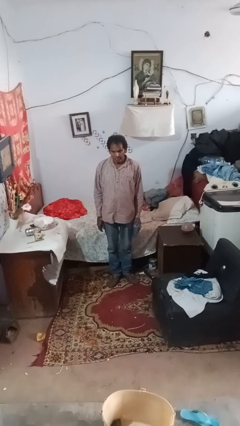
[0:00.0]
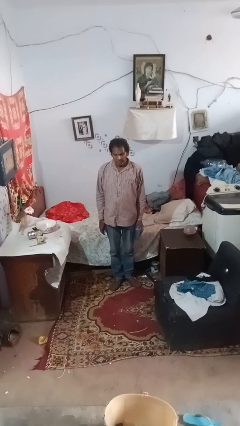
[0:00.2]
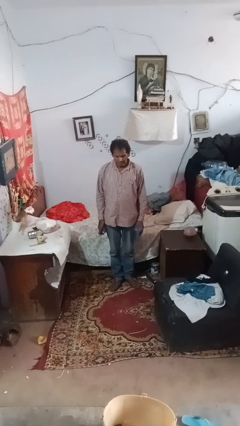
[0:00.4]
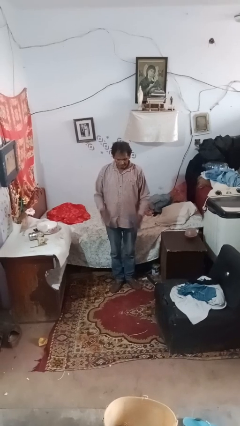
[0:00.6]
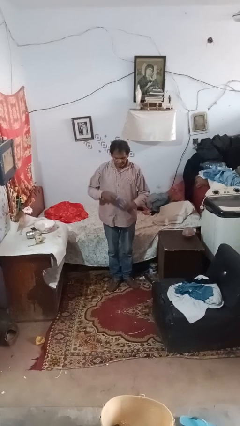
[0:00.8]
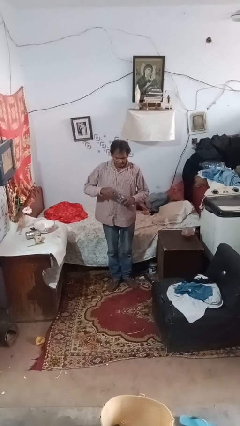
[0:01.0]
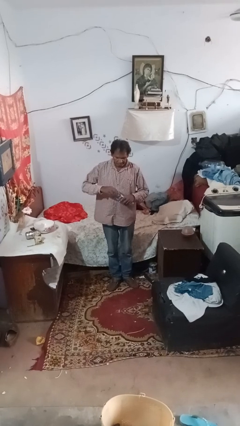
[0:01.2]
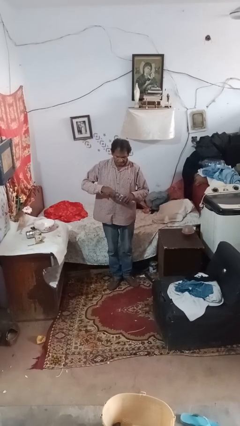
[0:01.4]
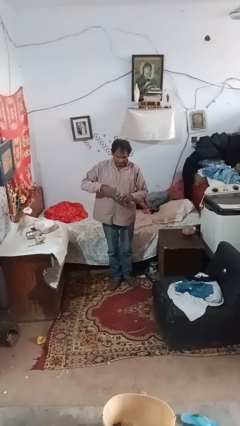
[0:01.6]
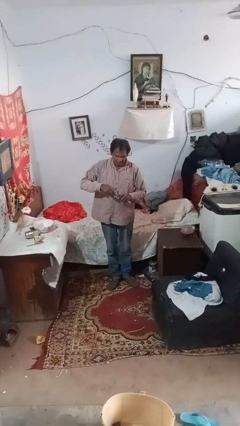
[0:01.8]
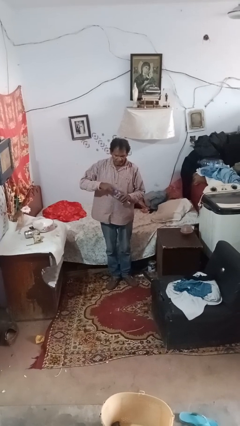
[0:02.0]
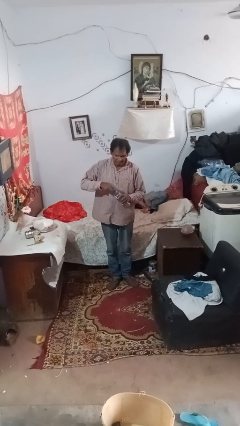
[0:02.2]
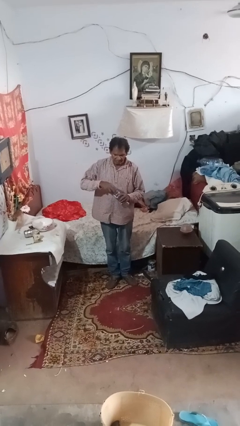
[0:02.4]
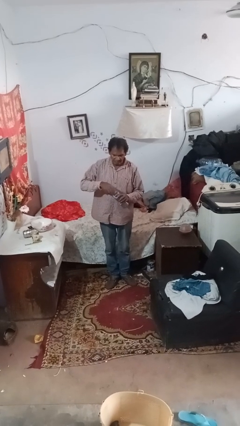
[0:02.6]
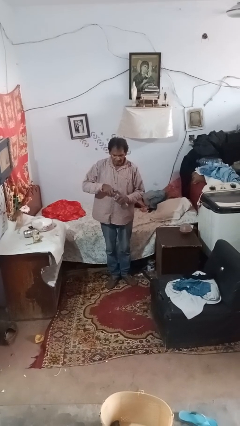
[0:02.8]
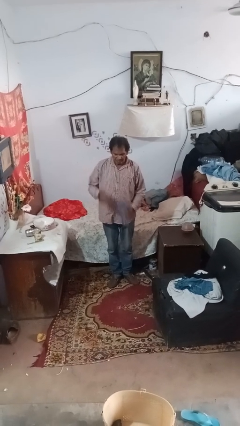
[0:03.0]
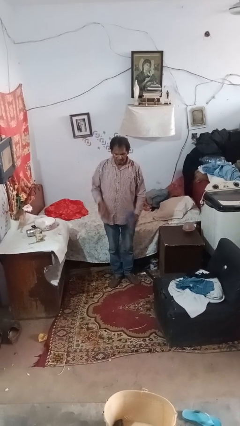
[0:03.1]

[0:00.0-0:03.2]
person screws lid to bottle

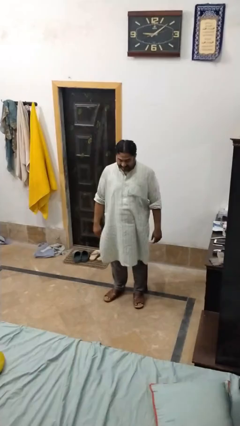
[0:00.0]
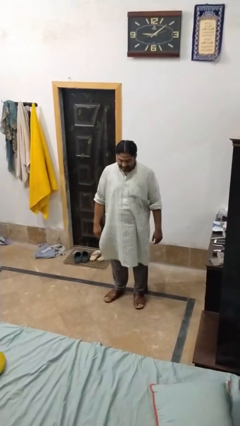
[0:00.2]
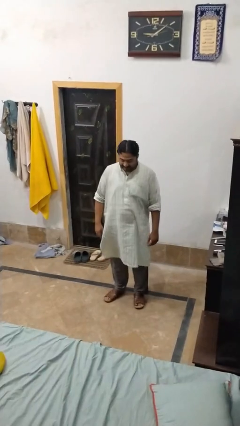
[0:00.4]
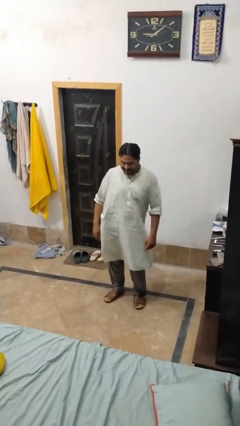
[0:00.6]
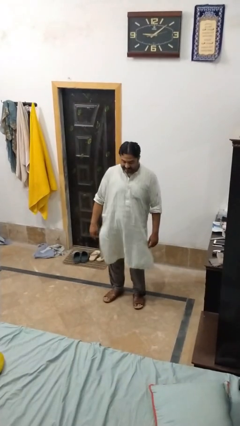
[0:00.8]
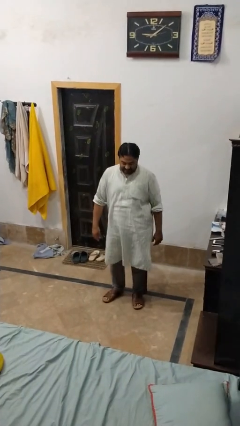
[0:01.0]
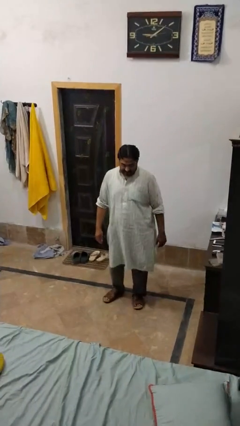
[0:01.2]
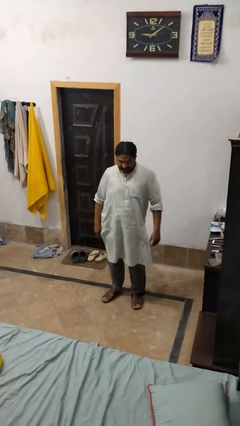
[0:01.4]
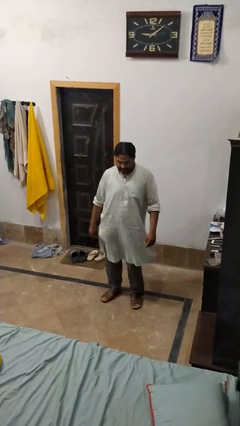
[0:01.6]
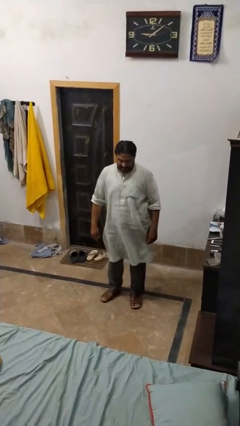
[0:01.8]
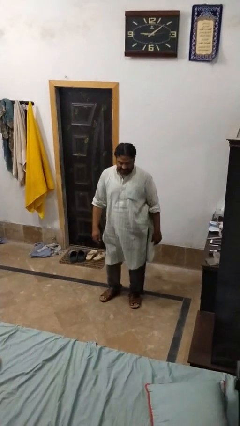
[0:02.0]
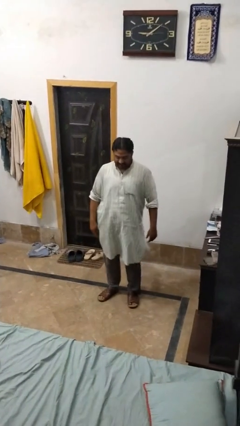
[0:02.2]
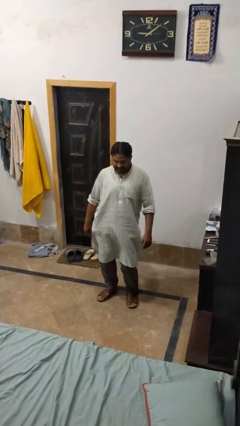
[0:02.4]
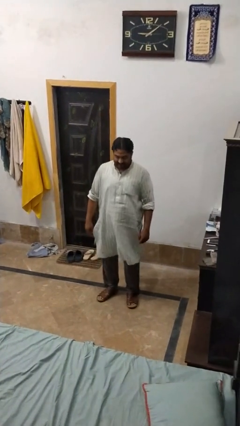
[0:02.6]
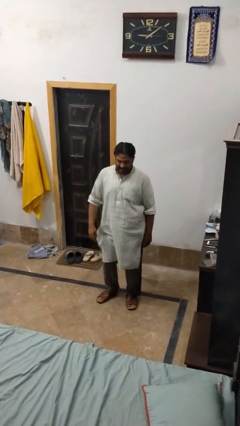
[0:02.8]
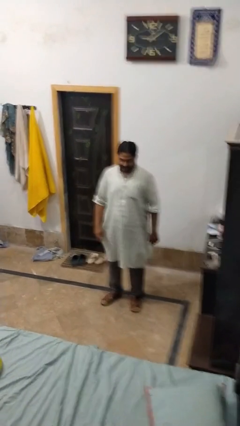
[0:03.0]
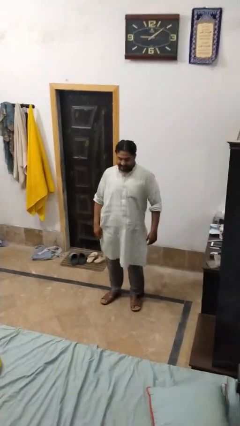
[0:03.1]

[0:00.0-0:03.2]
person wiggles hips

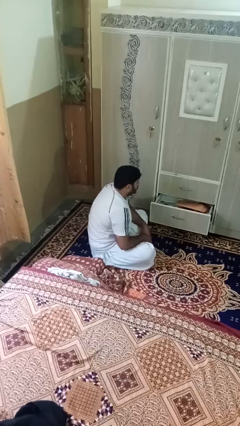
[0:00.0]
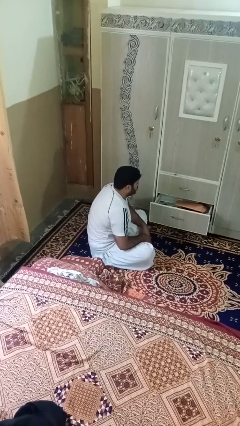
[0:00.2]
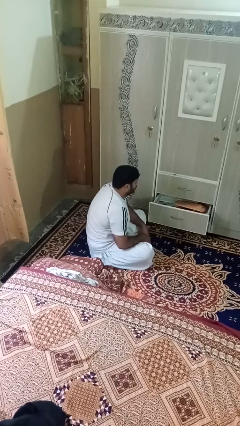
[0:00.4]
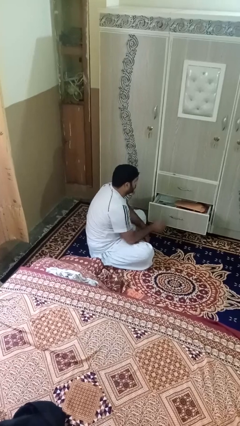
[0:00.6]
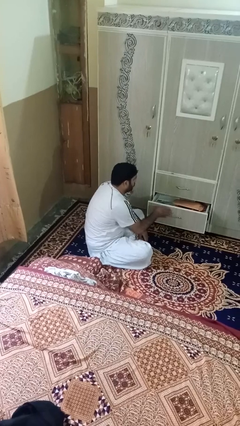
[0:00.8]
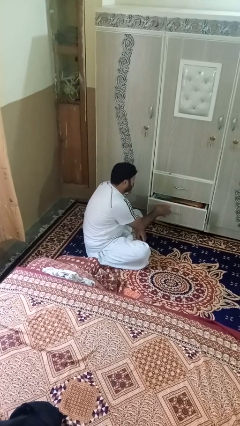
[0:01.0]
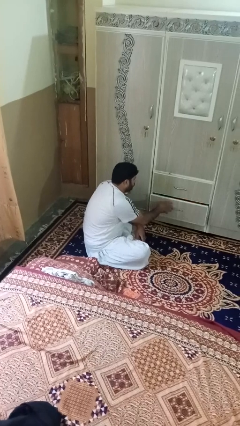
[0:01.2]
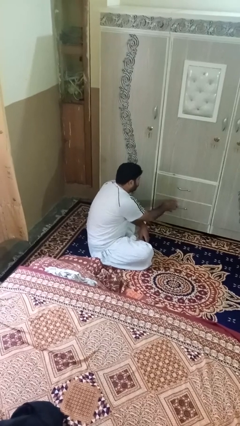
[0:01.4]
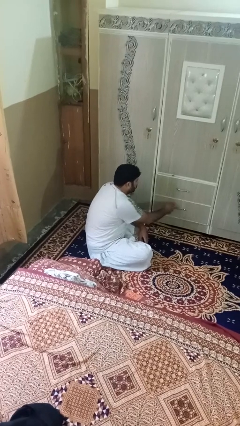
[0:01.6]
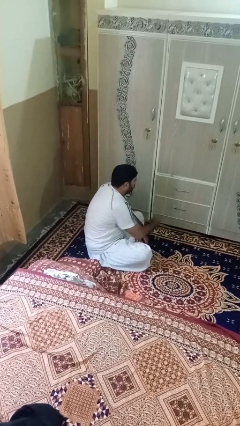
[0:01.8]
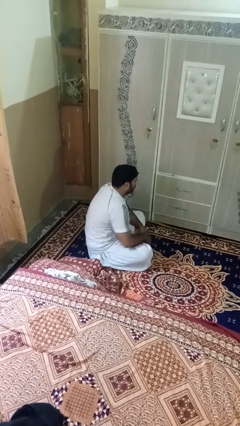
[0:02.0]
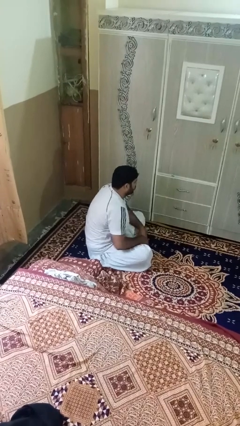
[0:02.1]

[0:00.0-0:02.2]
person closes dresser drawer

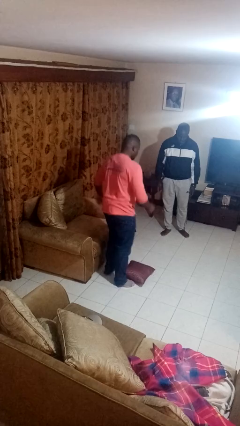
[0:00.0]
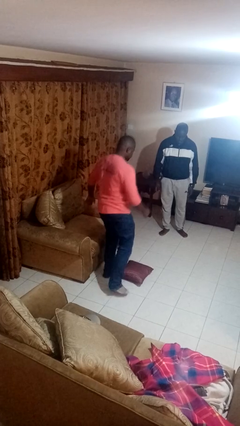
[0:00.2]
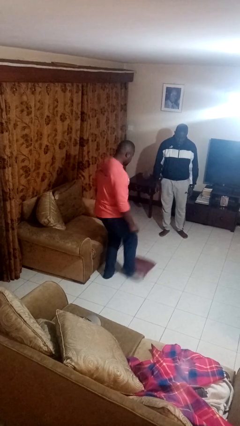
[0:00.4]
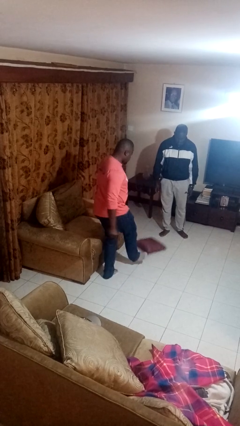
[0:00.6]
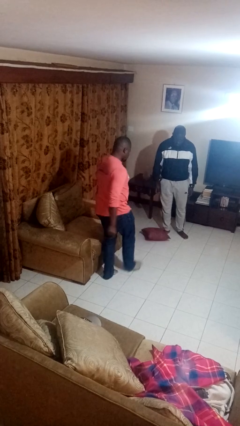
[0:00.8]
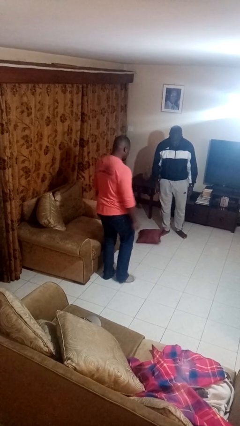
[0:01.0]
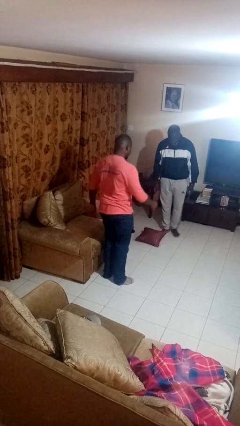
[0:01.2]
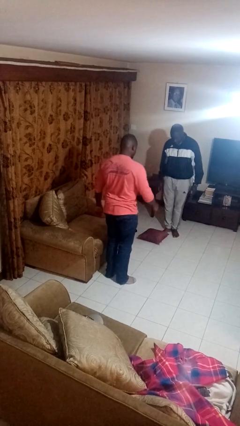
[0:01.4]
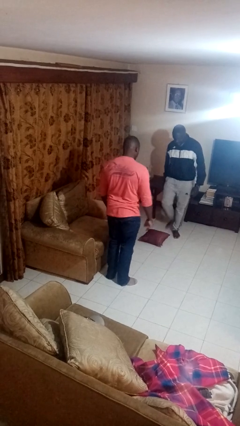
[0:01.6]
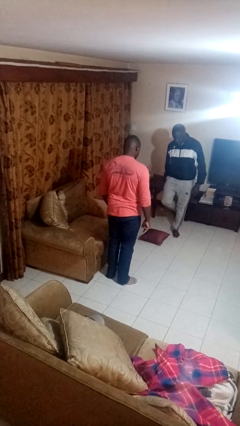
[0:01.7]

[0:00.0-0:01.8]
person kicks object to person

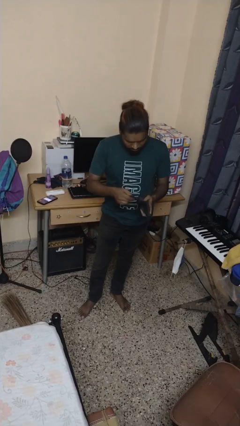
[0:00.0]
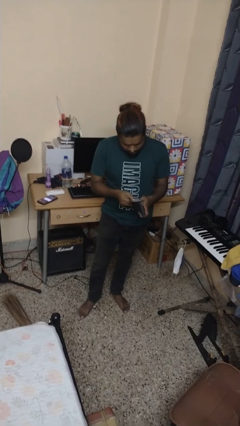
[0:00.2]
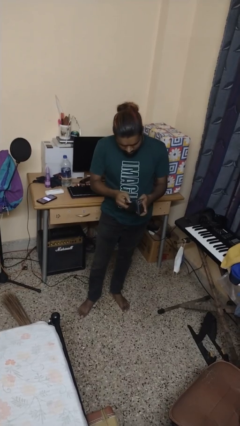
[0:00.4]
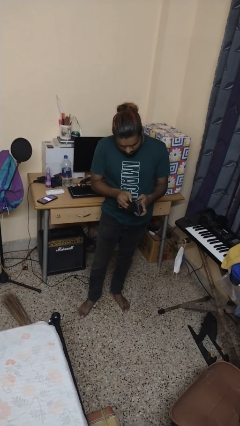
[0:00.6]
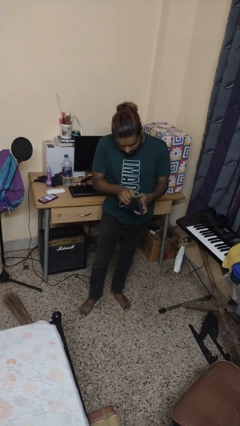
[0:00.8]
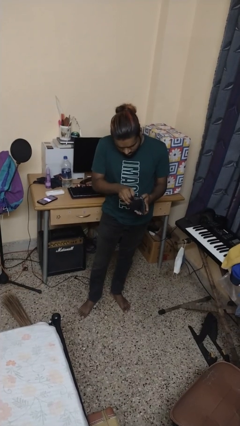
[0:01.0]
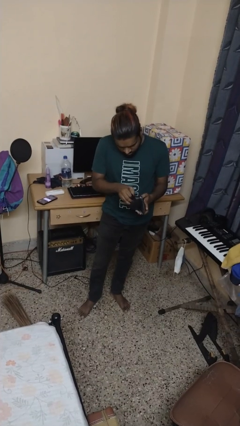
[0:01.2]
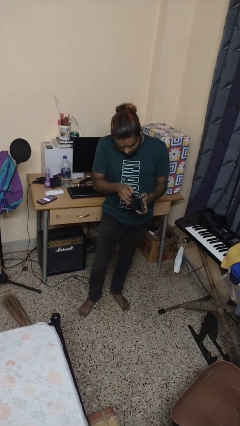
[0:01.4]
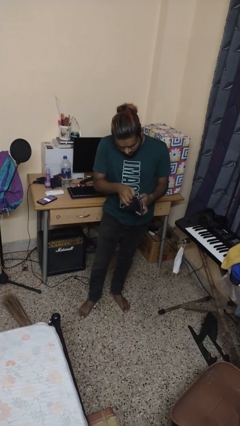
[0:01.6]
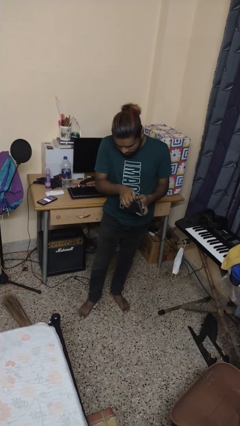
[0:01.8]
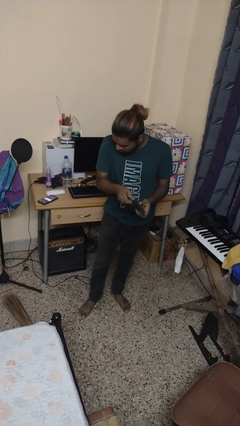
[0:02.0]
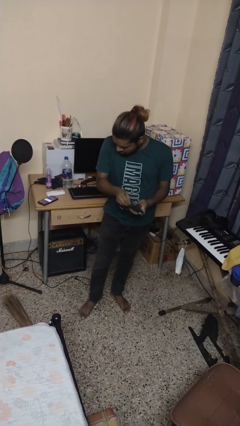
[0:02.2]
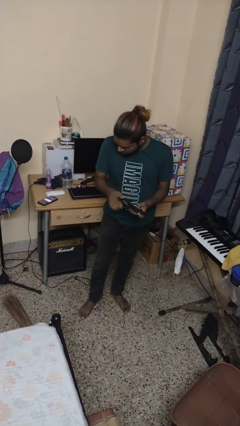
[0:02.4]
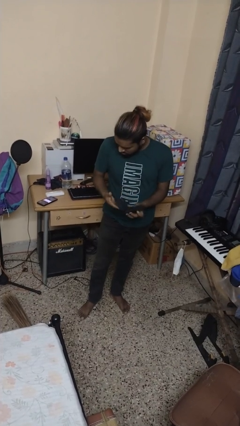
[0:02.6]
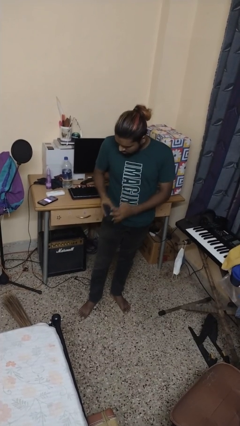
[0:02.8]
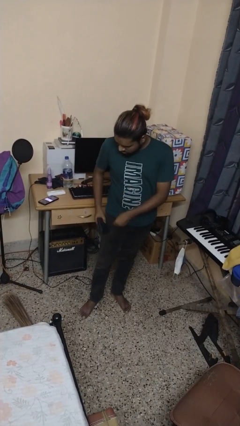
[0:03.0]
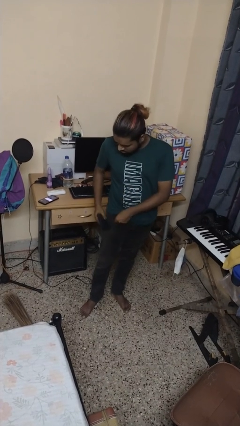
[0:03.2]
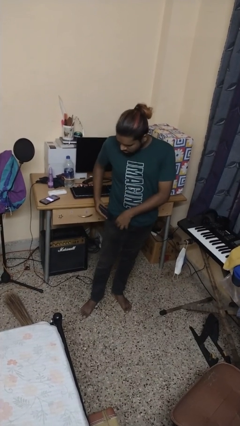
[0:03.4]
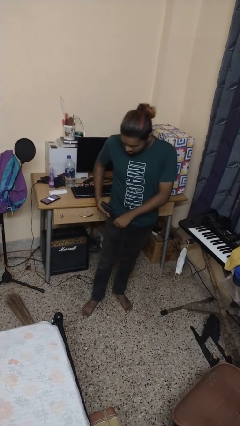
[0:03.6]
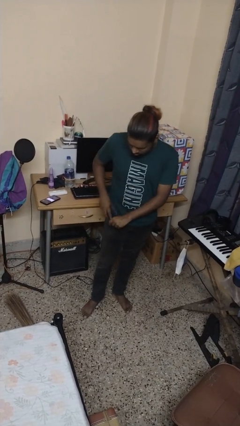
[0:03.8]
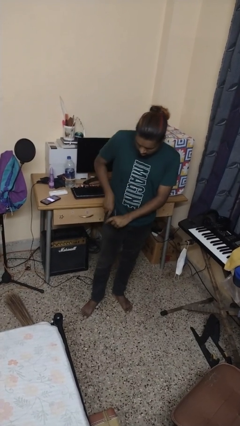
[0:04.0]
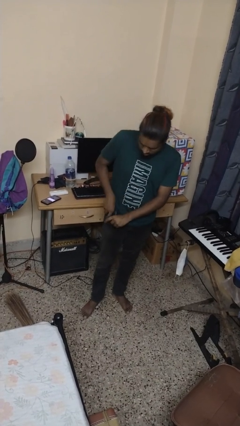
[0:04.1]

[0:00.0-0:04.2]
person puts object into purse

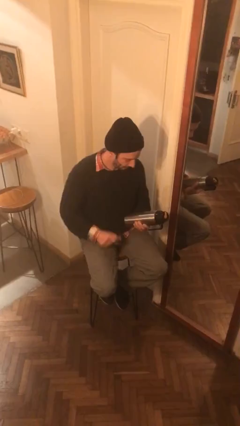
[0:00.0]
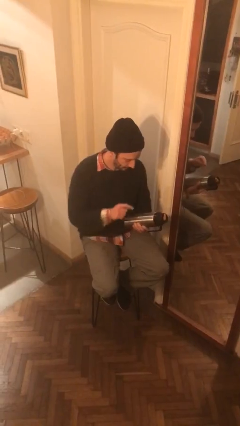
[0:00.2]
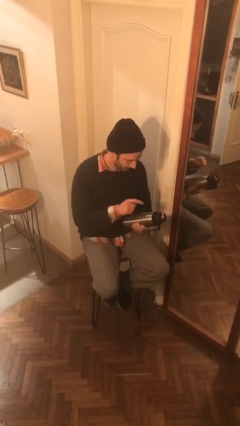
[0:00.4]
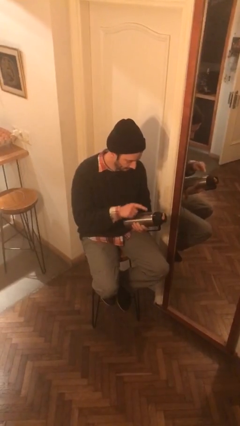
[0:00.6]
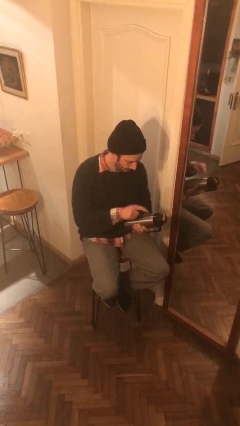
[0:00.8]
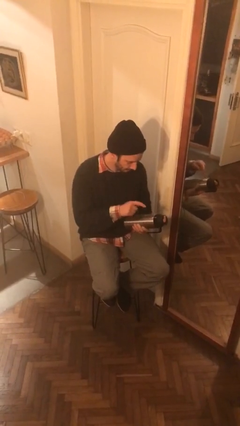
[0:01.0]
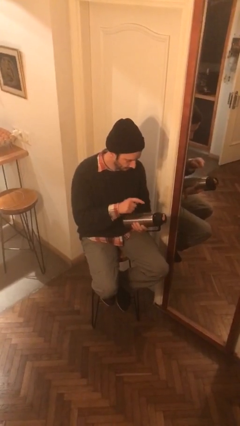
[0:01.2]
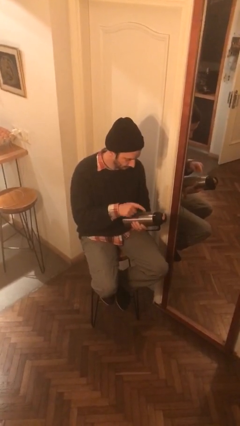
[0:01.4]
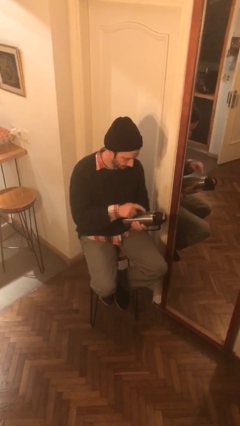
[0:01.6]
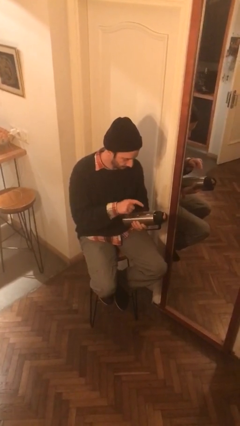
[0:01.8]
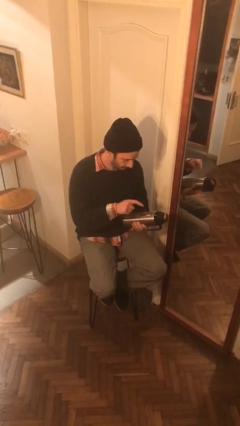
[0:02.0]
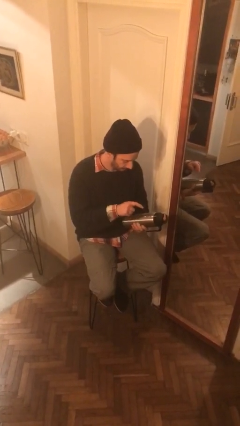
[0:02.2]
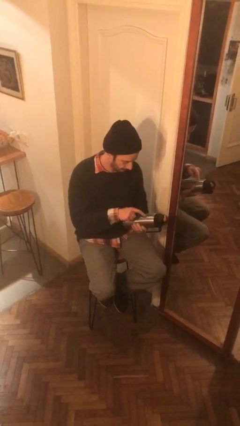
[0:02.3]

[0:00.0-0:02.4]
person taps object with finger

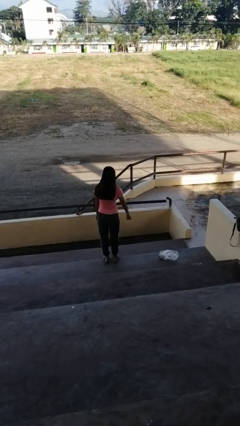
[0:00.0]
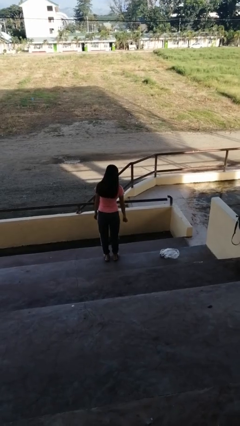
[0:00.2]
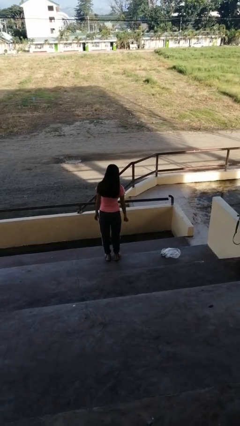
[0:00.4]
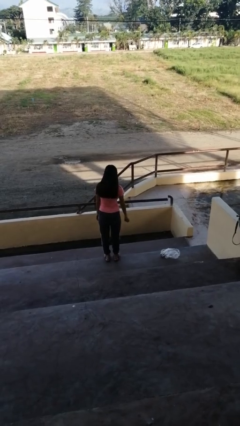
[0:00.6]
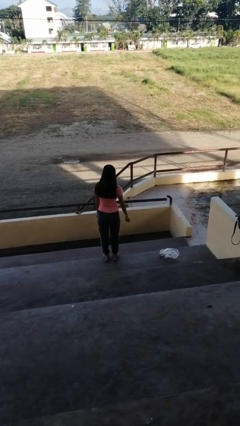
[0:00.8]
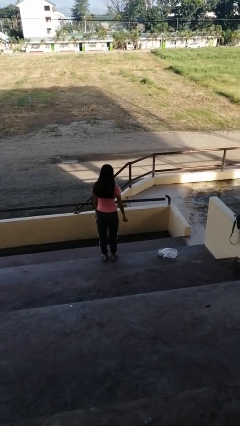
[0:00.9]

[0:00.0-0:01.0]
person catches dropped object
